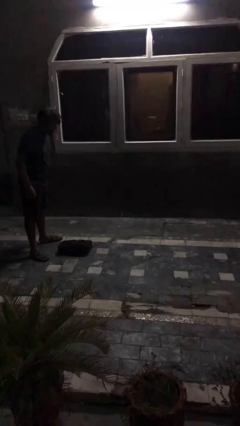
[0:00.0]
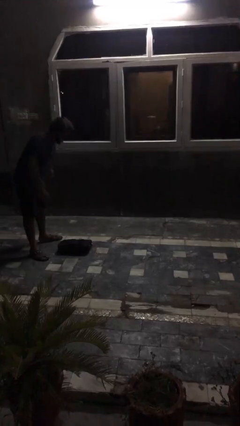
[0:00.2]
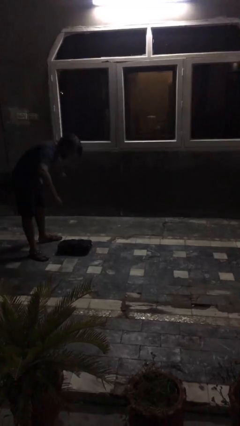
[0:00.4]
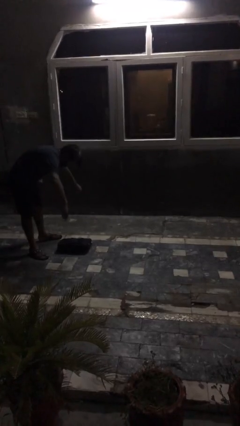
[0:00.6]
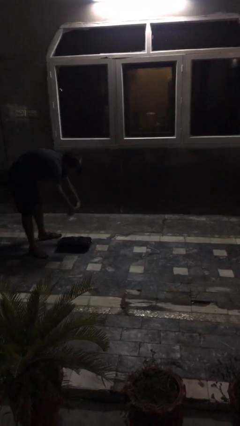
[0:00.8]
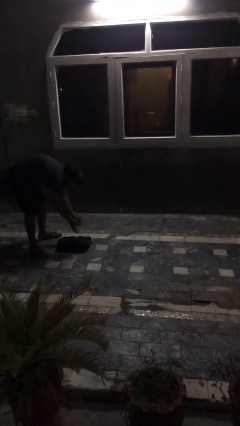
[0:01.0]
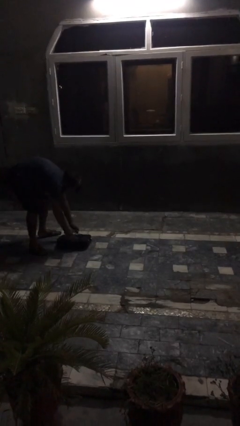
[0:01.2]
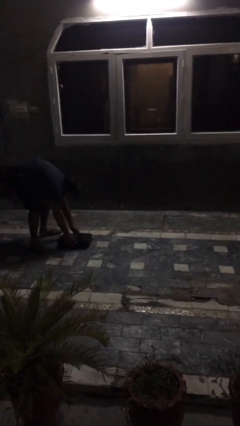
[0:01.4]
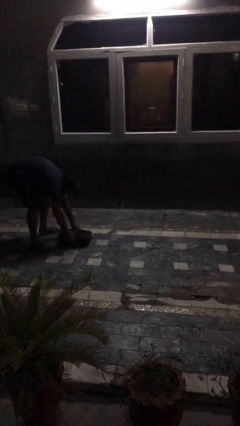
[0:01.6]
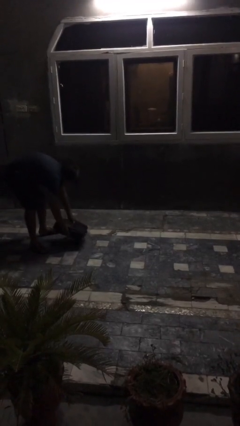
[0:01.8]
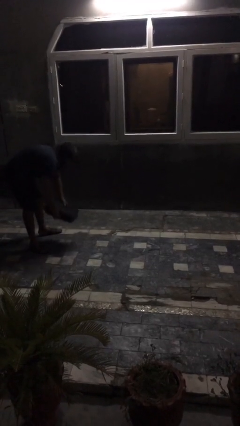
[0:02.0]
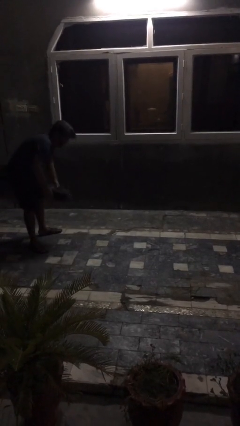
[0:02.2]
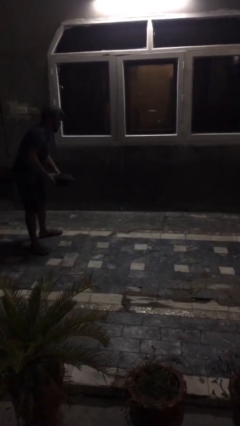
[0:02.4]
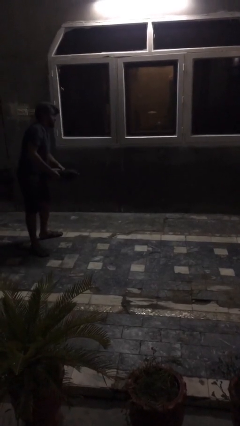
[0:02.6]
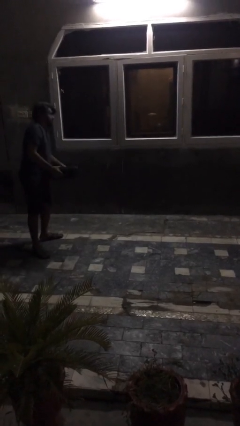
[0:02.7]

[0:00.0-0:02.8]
person picks up object from floor

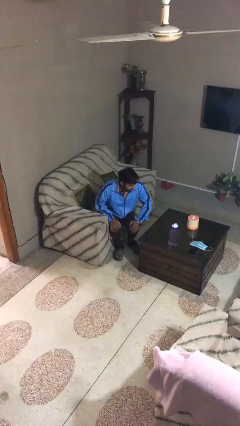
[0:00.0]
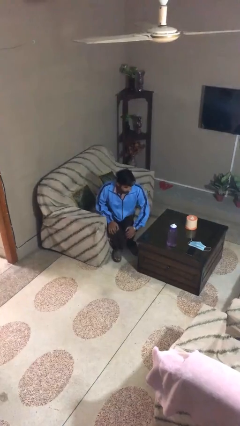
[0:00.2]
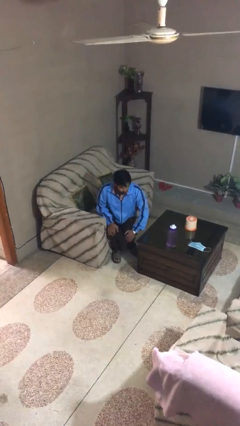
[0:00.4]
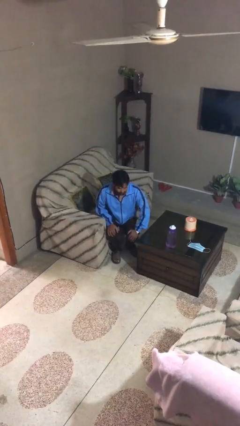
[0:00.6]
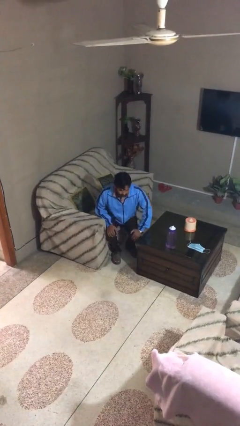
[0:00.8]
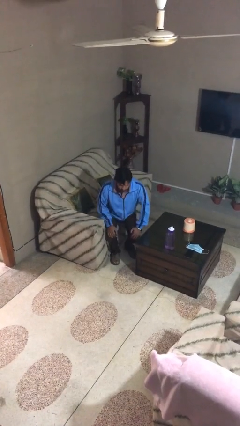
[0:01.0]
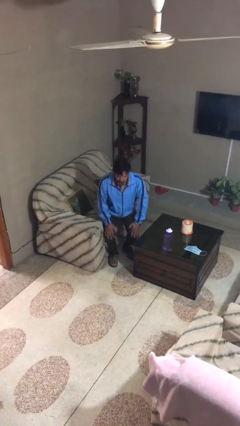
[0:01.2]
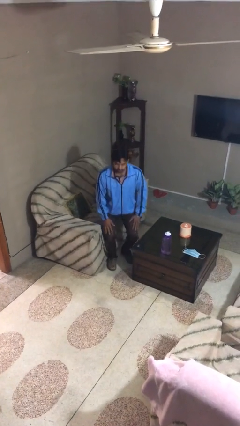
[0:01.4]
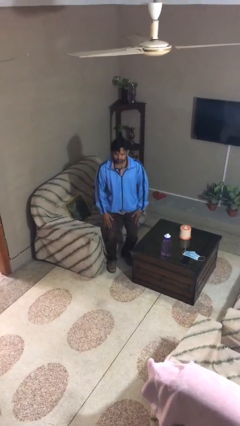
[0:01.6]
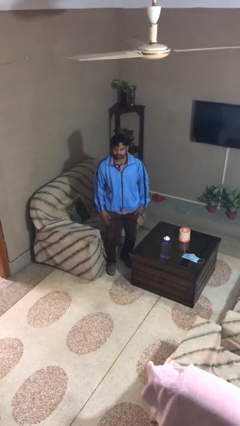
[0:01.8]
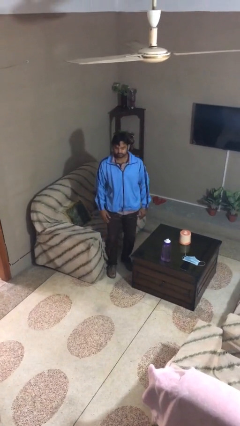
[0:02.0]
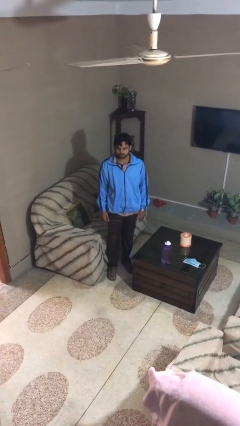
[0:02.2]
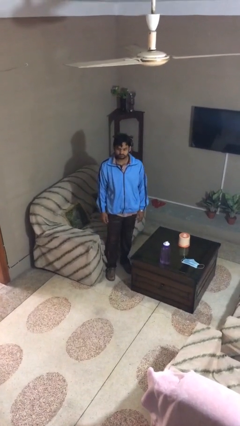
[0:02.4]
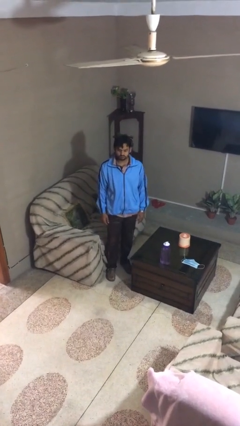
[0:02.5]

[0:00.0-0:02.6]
person stands up

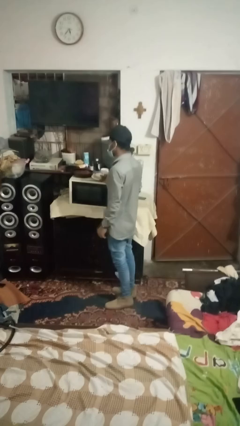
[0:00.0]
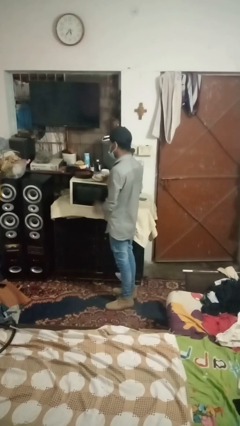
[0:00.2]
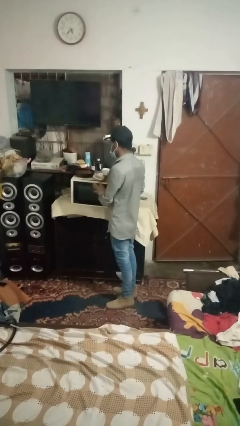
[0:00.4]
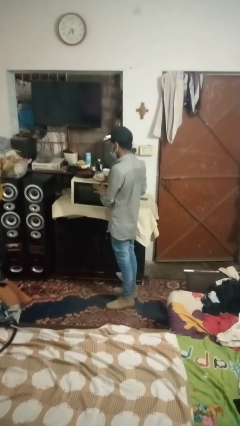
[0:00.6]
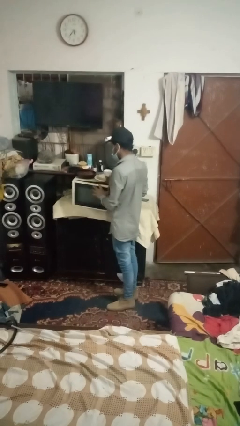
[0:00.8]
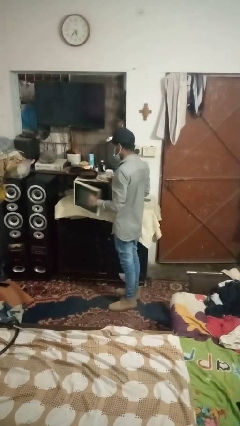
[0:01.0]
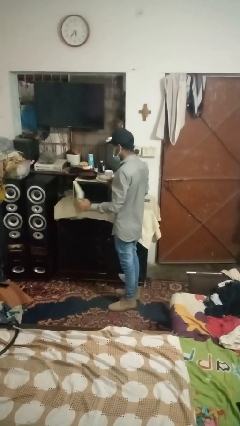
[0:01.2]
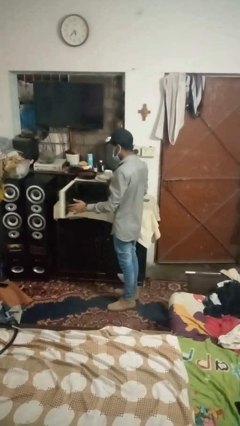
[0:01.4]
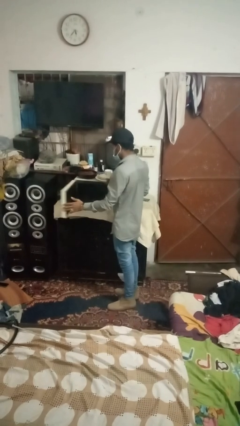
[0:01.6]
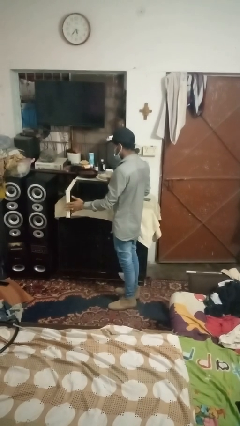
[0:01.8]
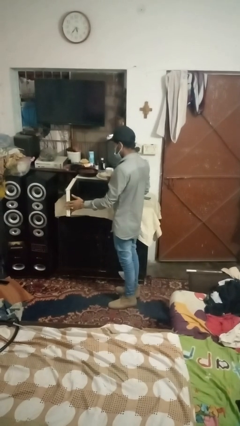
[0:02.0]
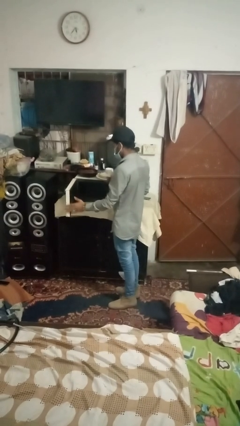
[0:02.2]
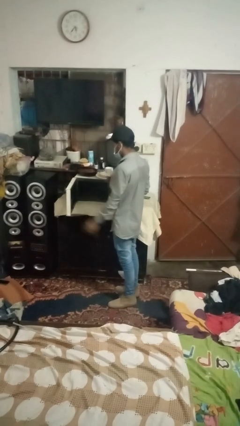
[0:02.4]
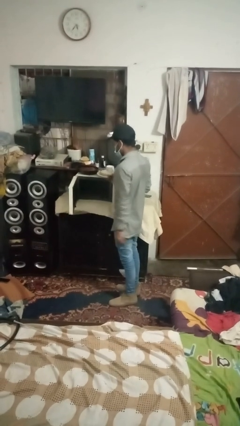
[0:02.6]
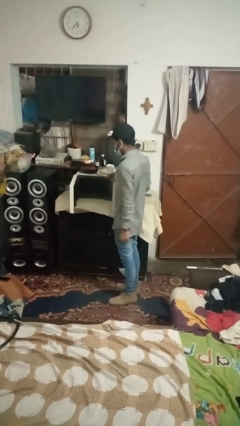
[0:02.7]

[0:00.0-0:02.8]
person opens dishwasher

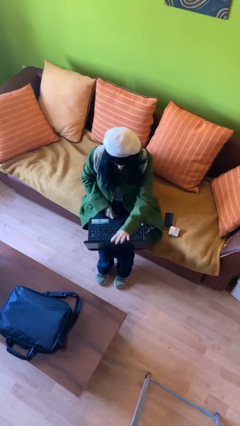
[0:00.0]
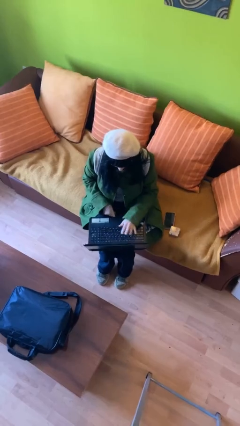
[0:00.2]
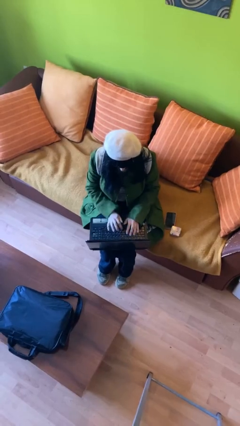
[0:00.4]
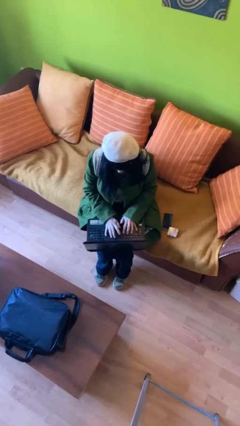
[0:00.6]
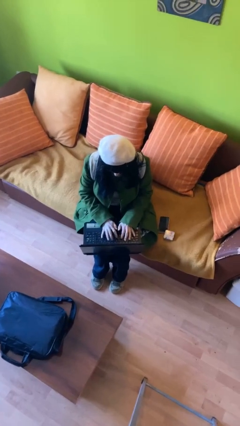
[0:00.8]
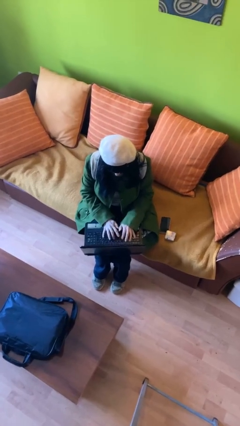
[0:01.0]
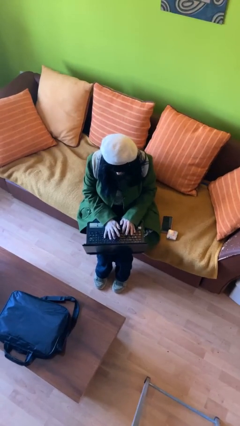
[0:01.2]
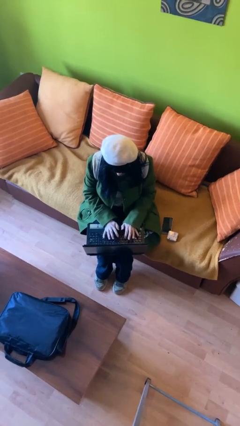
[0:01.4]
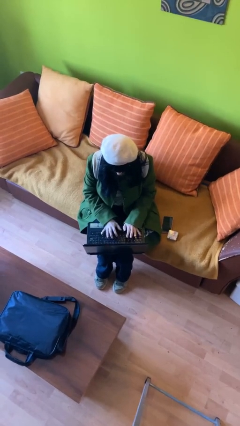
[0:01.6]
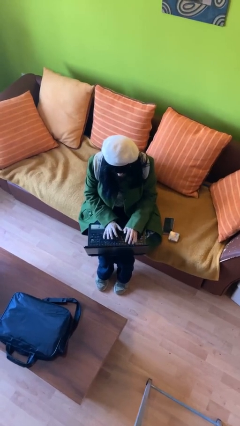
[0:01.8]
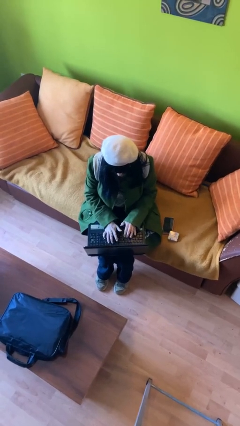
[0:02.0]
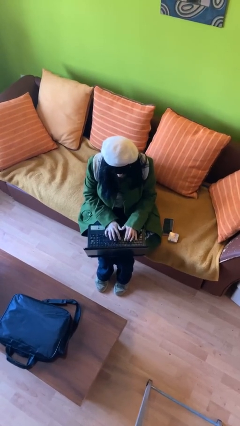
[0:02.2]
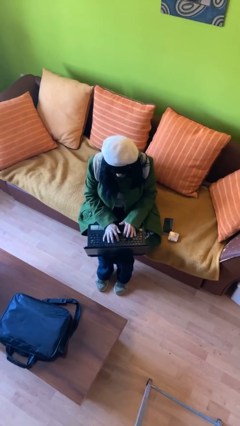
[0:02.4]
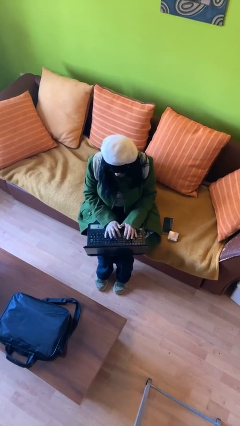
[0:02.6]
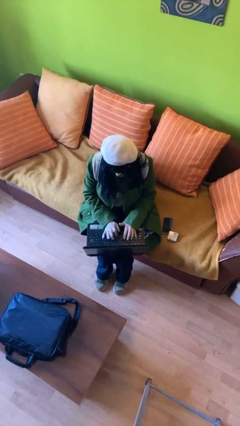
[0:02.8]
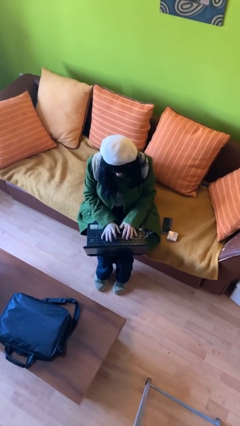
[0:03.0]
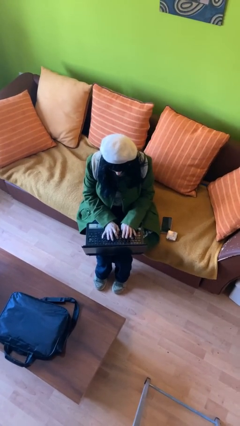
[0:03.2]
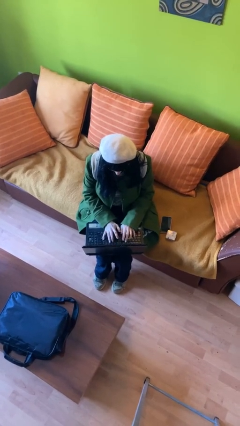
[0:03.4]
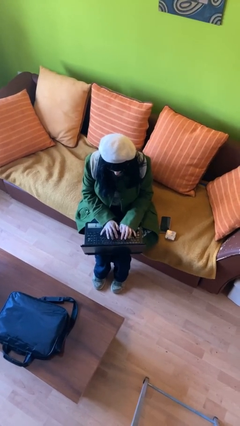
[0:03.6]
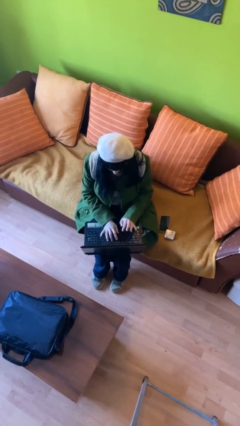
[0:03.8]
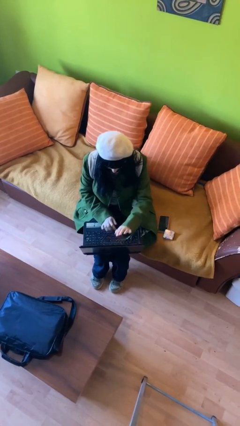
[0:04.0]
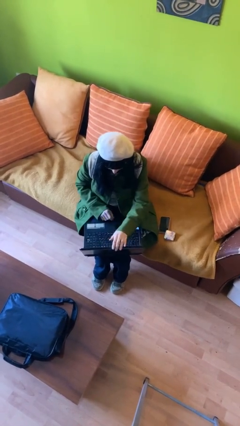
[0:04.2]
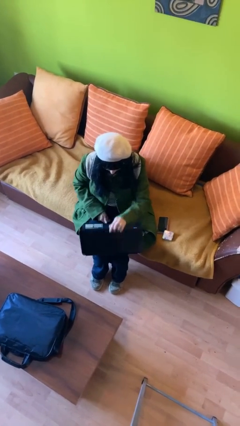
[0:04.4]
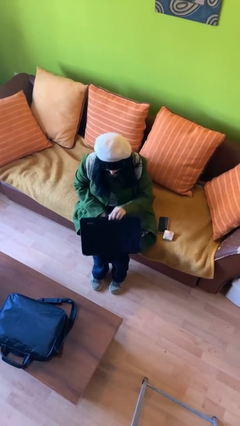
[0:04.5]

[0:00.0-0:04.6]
person interacts with laptop

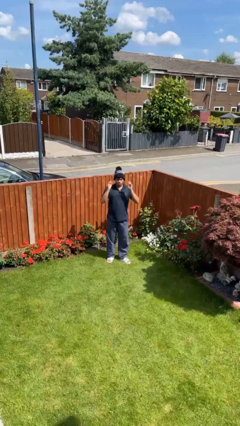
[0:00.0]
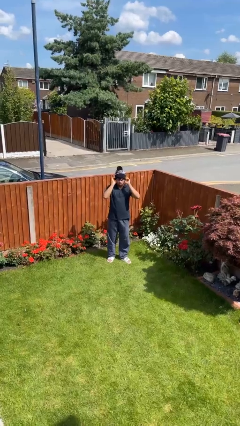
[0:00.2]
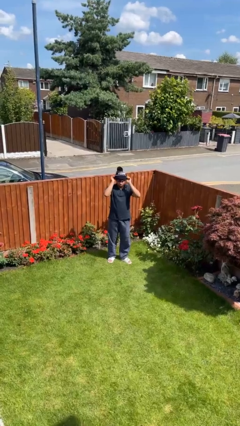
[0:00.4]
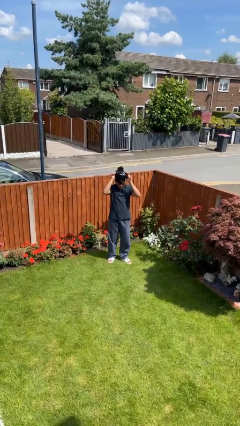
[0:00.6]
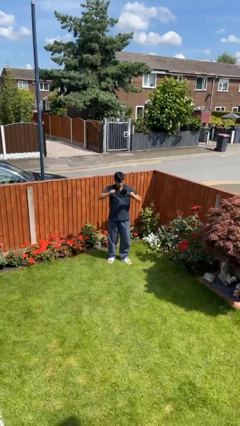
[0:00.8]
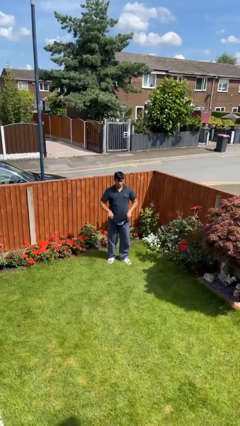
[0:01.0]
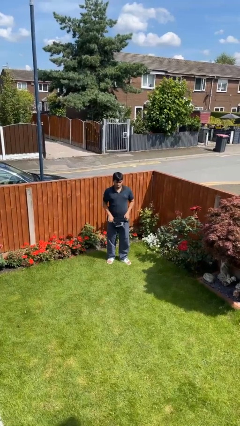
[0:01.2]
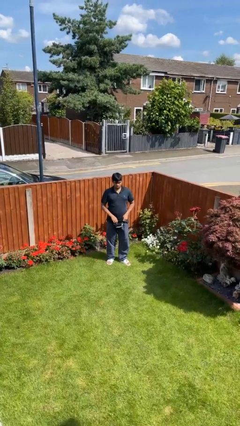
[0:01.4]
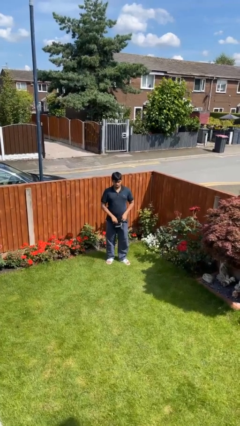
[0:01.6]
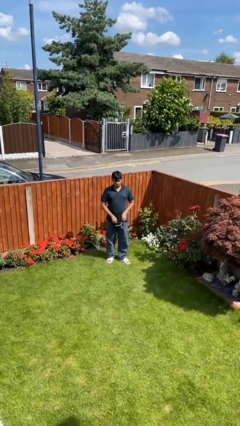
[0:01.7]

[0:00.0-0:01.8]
person takes off hat

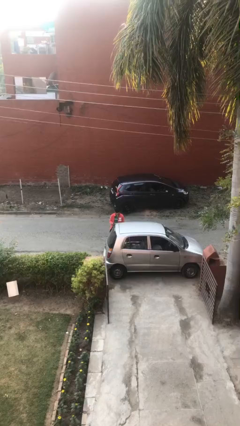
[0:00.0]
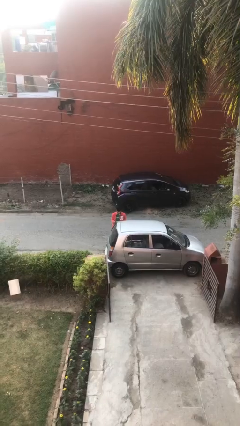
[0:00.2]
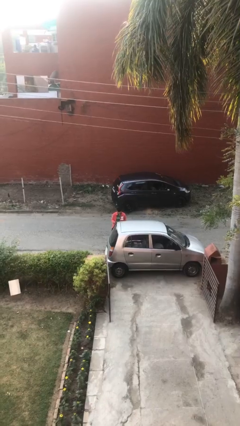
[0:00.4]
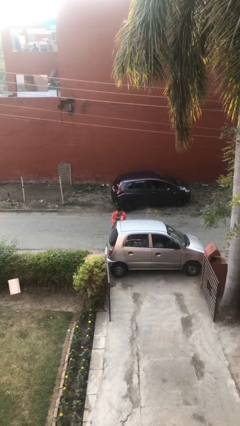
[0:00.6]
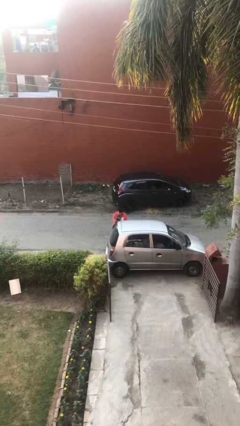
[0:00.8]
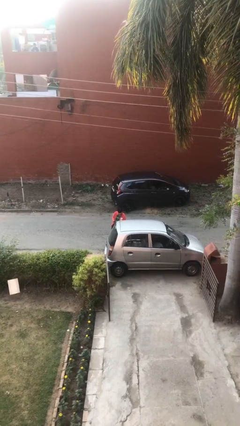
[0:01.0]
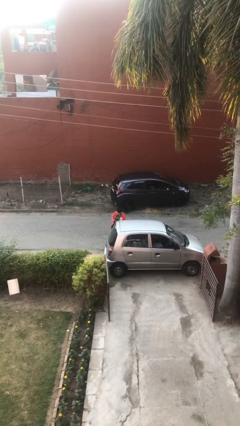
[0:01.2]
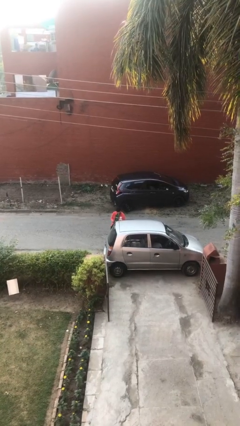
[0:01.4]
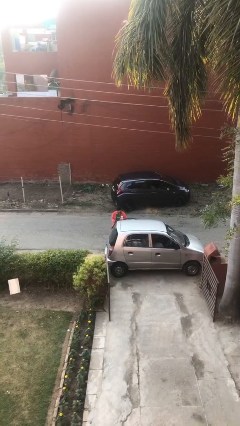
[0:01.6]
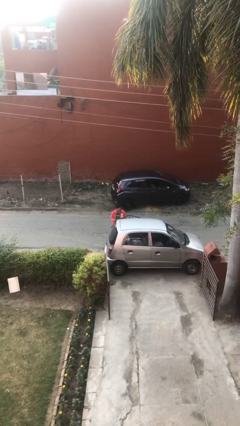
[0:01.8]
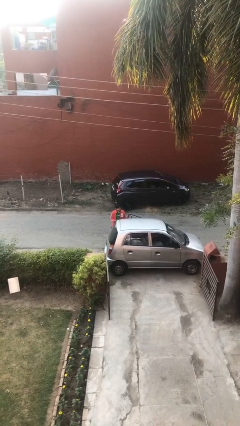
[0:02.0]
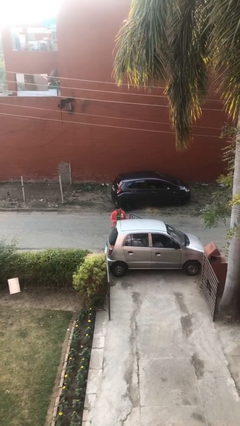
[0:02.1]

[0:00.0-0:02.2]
person opens car door

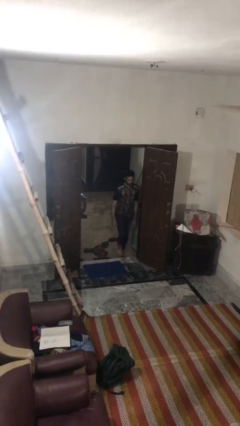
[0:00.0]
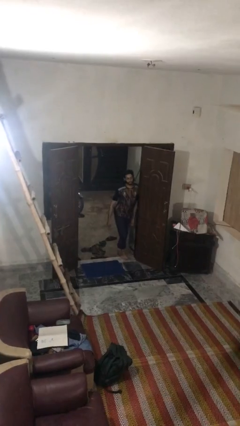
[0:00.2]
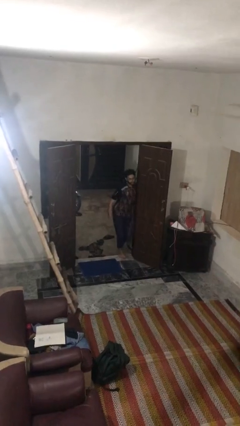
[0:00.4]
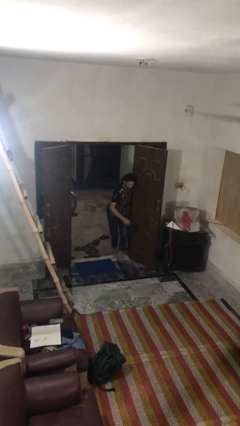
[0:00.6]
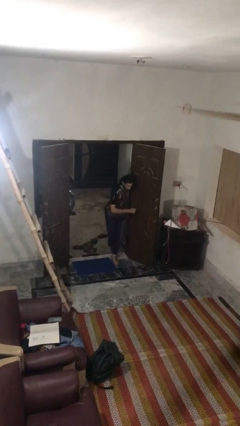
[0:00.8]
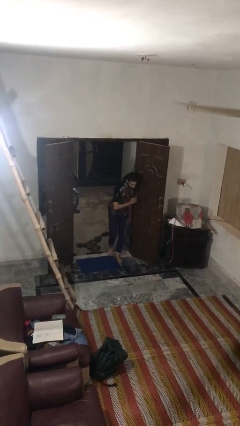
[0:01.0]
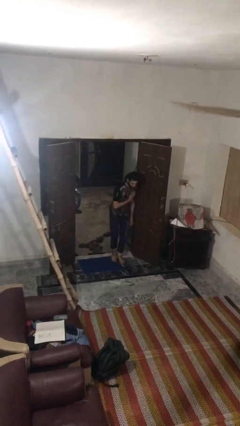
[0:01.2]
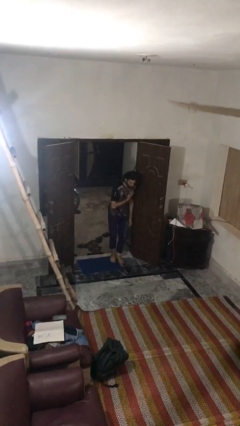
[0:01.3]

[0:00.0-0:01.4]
person bumps into wall
